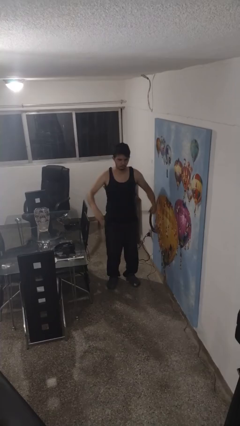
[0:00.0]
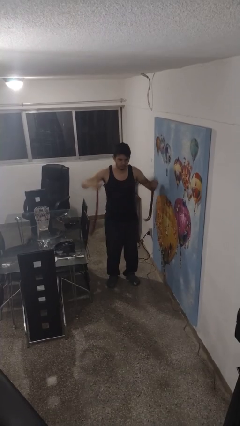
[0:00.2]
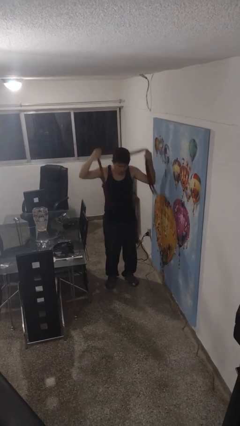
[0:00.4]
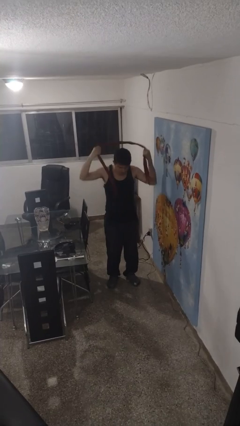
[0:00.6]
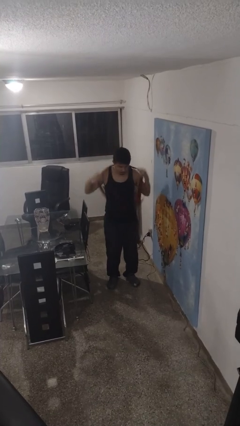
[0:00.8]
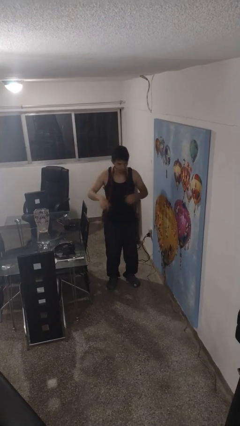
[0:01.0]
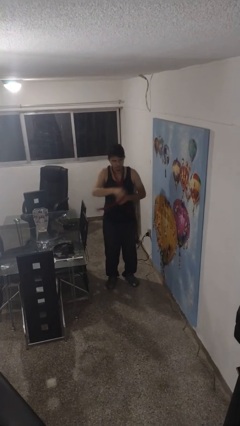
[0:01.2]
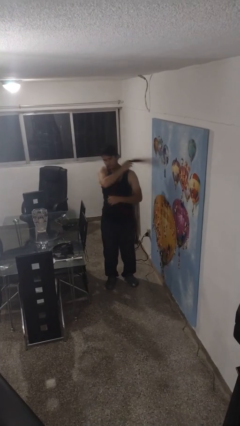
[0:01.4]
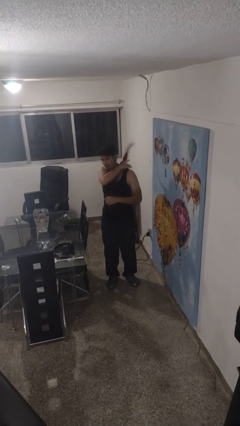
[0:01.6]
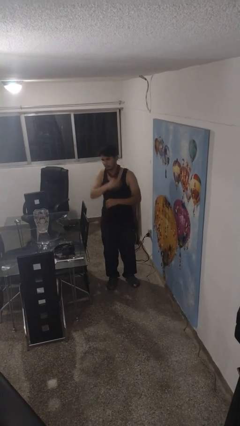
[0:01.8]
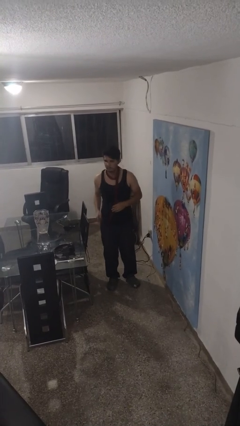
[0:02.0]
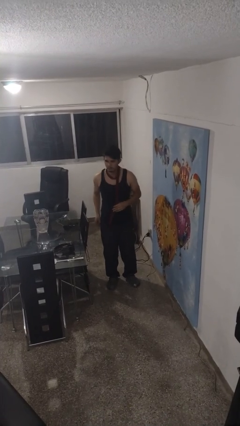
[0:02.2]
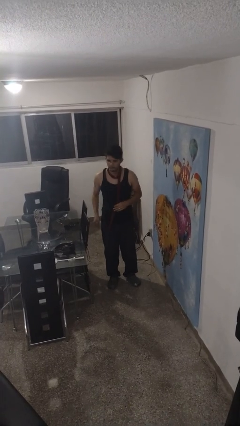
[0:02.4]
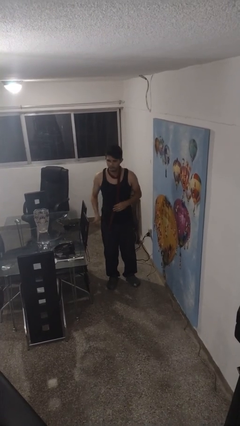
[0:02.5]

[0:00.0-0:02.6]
person puts on scarf

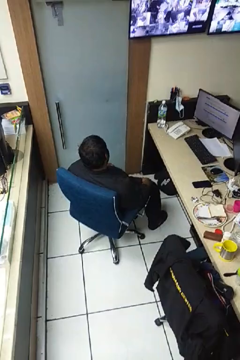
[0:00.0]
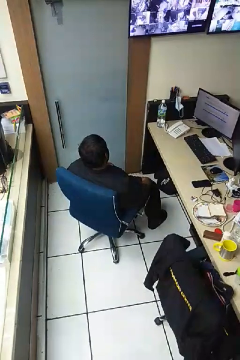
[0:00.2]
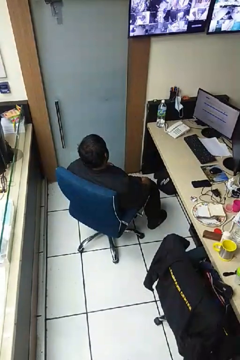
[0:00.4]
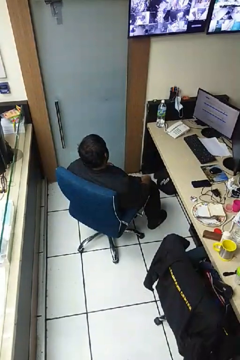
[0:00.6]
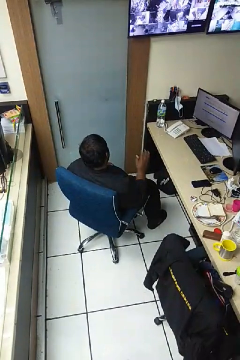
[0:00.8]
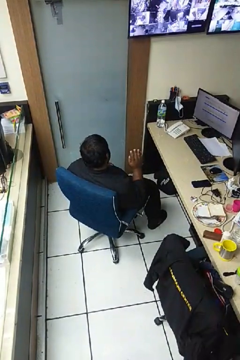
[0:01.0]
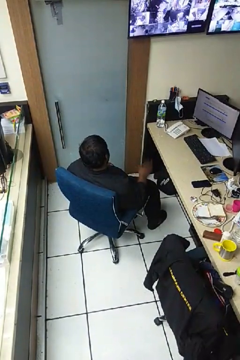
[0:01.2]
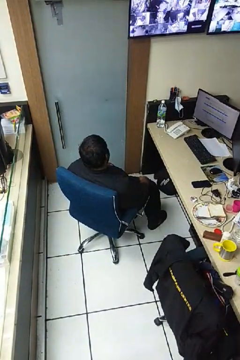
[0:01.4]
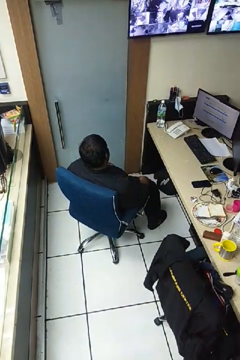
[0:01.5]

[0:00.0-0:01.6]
person slaps hands on thighs

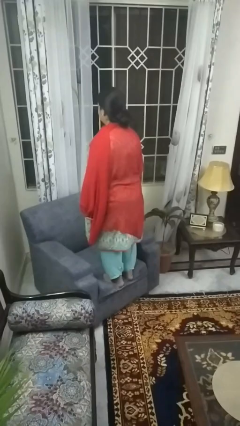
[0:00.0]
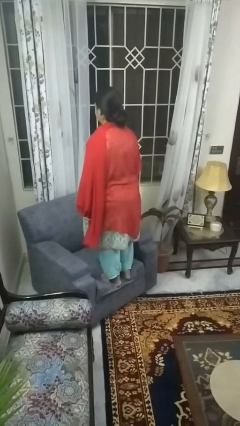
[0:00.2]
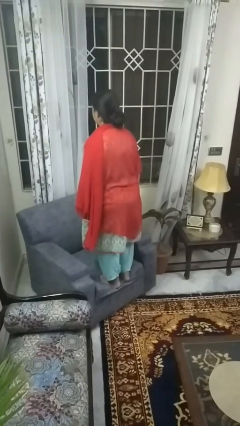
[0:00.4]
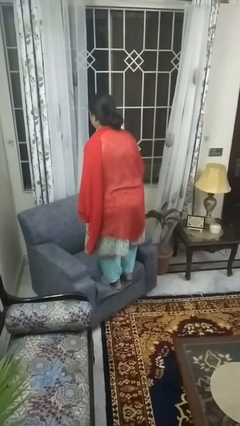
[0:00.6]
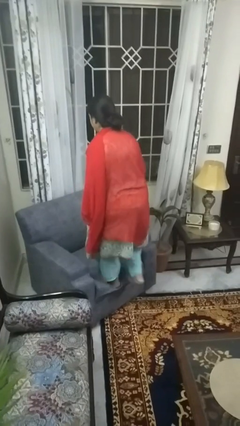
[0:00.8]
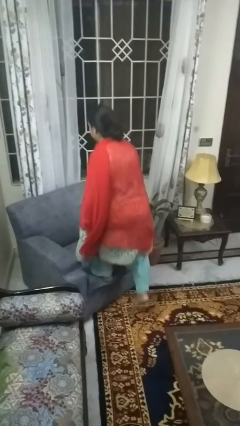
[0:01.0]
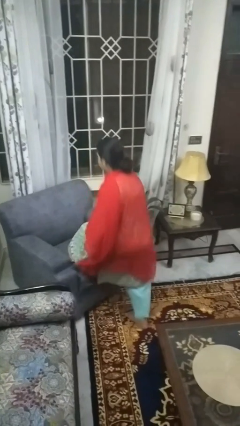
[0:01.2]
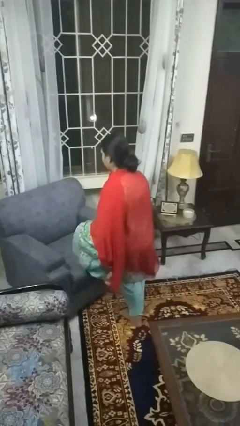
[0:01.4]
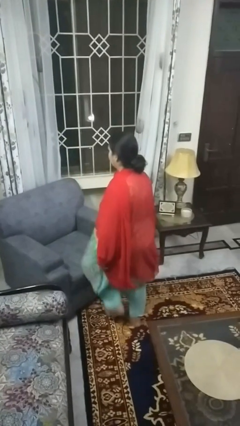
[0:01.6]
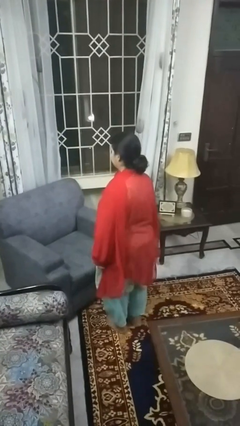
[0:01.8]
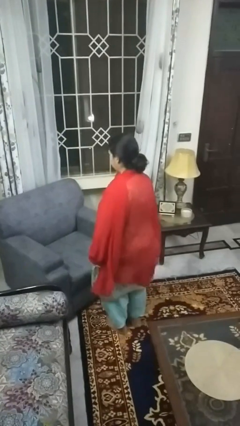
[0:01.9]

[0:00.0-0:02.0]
person climbs off couch

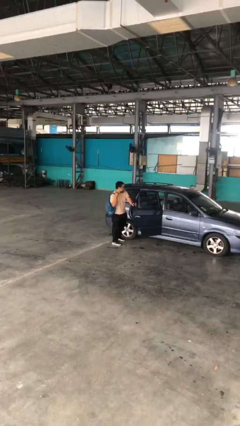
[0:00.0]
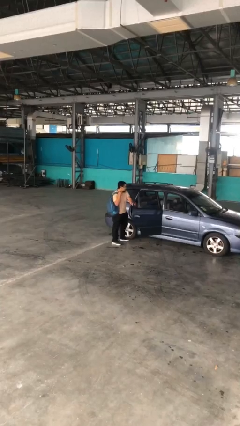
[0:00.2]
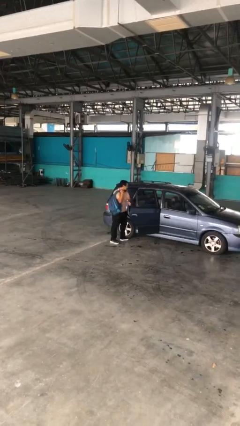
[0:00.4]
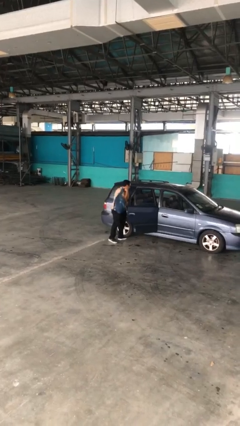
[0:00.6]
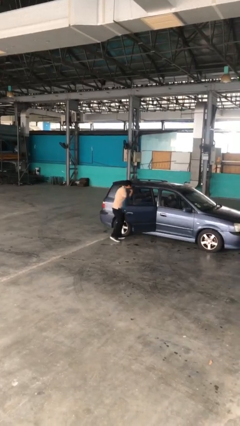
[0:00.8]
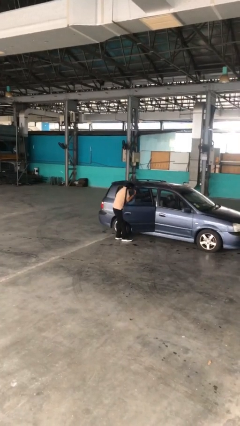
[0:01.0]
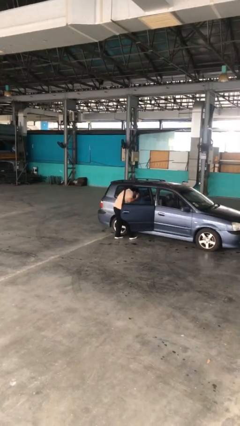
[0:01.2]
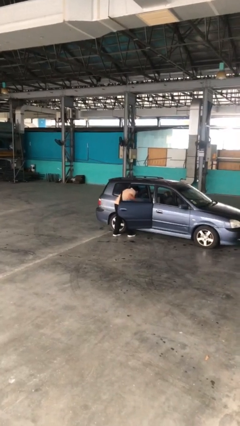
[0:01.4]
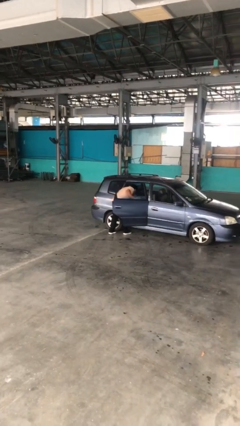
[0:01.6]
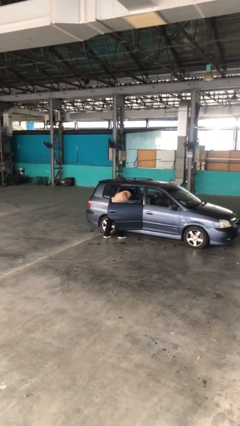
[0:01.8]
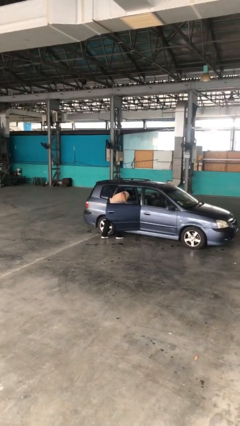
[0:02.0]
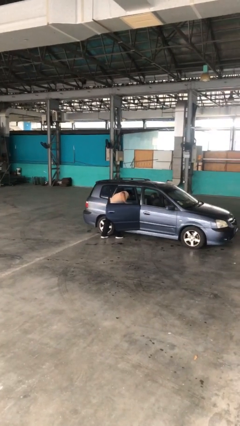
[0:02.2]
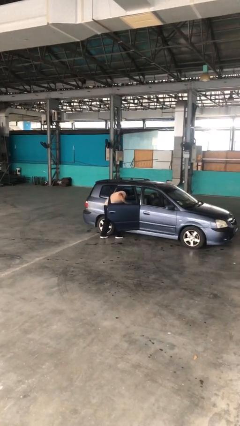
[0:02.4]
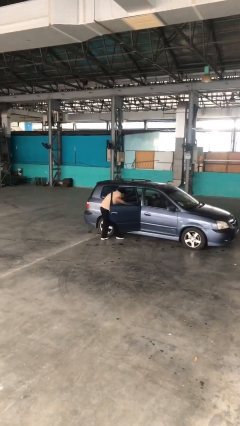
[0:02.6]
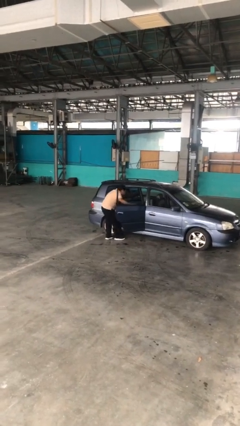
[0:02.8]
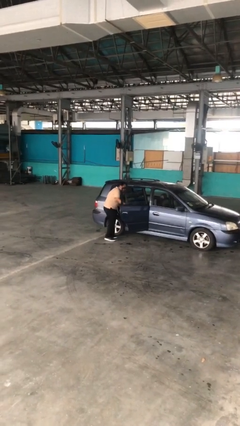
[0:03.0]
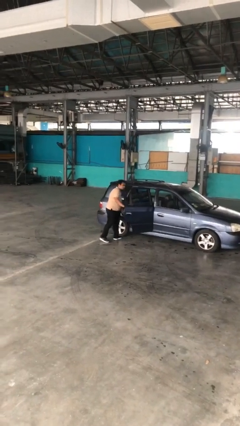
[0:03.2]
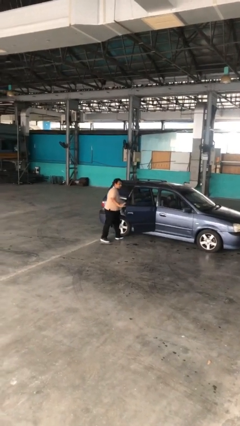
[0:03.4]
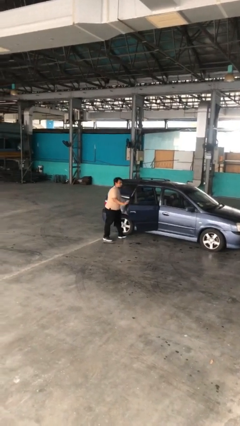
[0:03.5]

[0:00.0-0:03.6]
person loads car

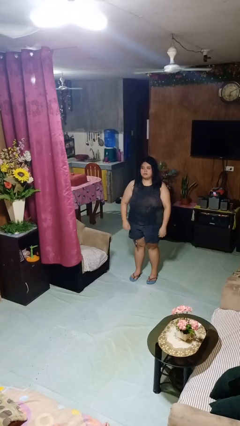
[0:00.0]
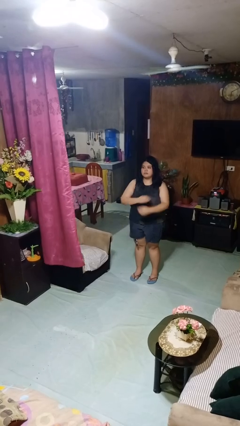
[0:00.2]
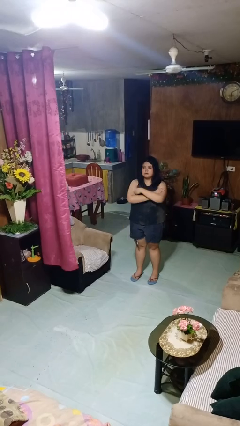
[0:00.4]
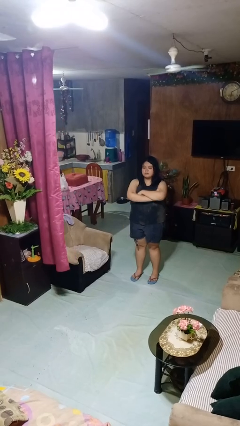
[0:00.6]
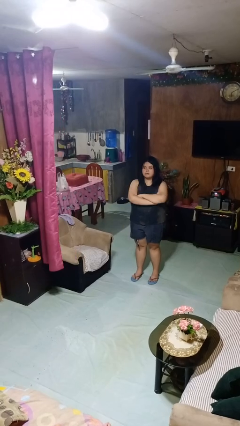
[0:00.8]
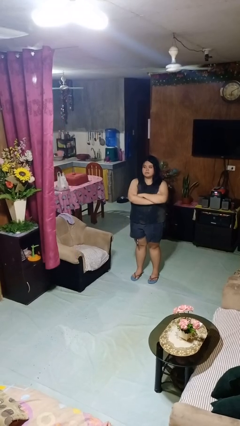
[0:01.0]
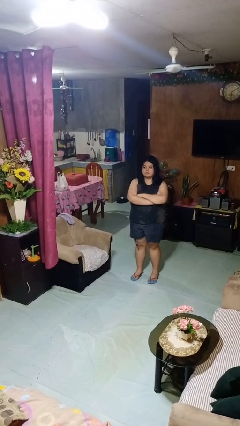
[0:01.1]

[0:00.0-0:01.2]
person crosses arms

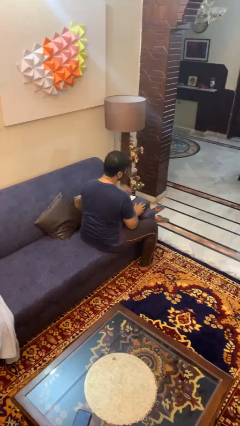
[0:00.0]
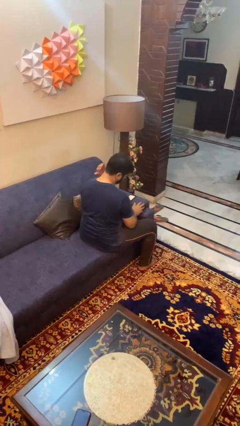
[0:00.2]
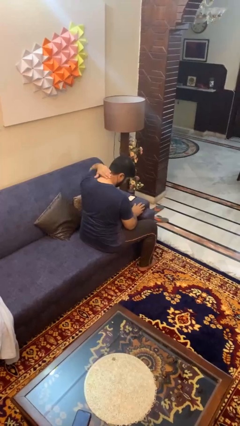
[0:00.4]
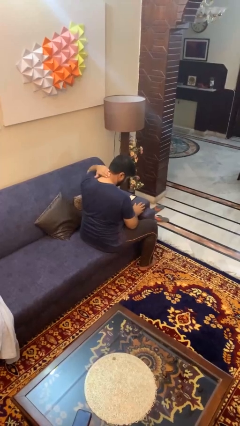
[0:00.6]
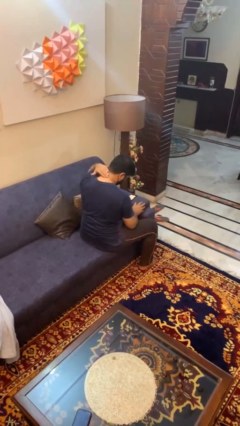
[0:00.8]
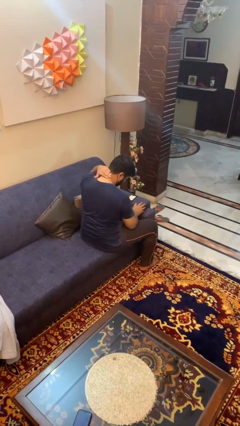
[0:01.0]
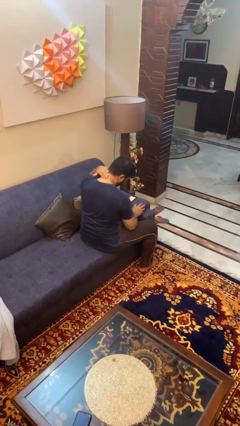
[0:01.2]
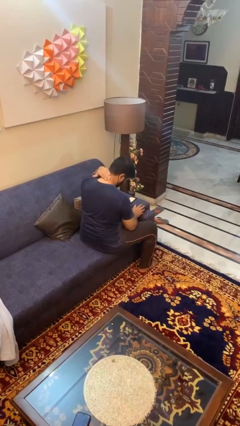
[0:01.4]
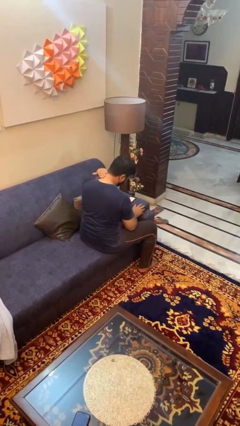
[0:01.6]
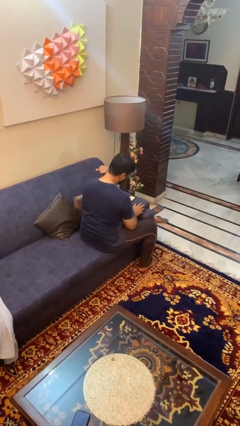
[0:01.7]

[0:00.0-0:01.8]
person rubs neck

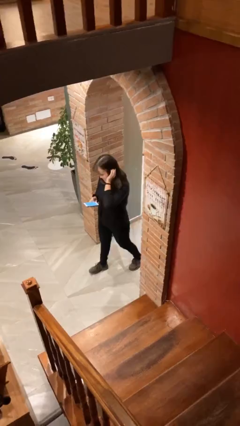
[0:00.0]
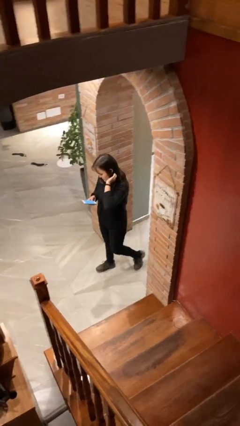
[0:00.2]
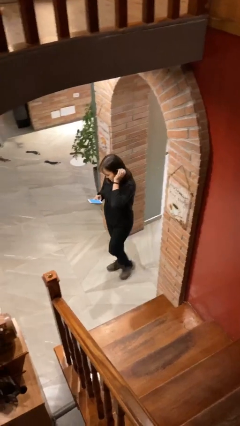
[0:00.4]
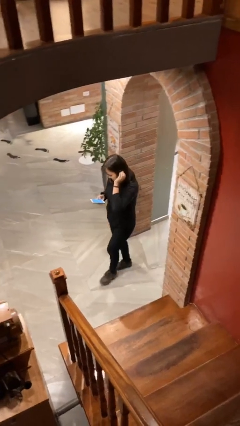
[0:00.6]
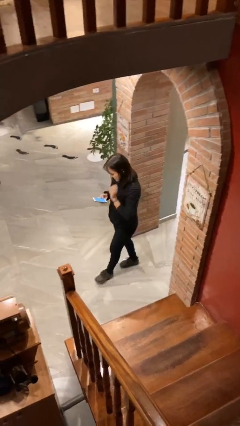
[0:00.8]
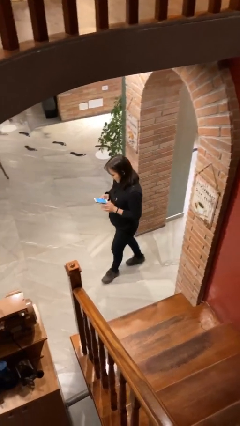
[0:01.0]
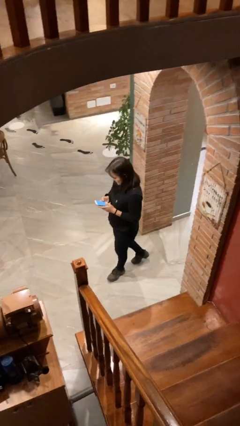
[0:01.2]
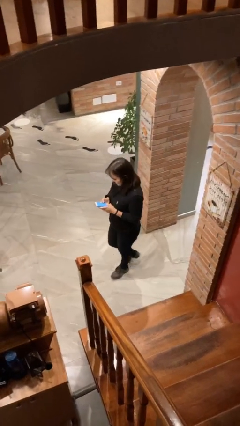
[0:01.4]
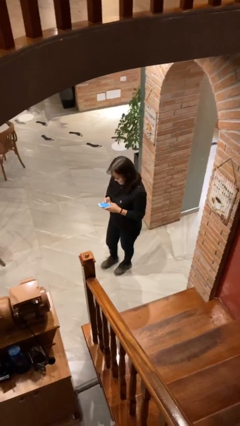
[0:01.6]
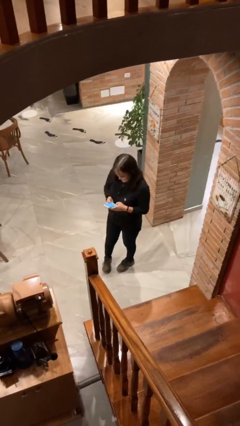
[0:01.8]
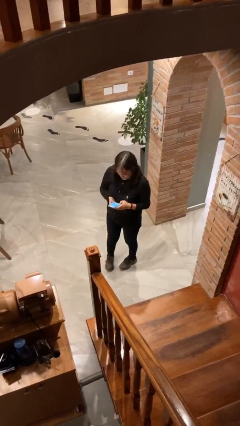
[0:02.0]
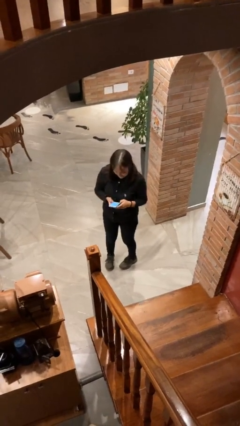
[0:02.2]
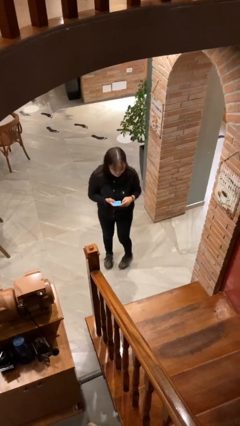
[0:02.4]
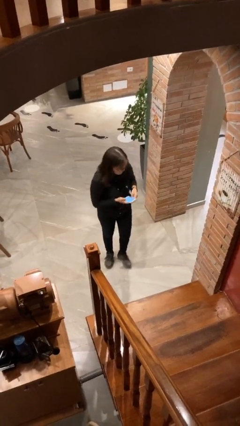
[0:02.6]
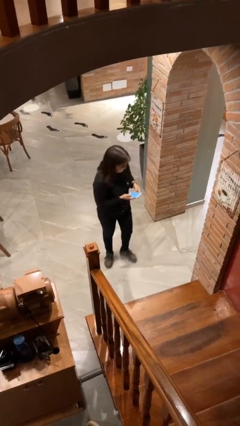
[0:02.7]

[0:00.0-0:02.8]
person enters scene through structure

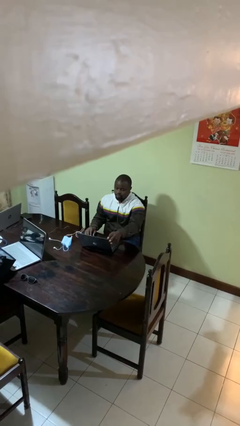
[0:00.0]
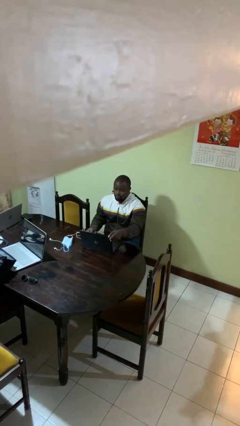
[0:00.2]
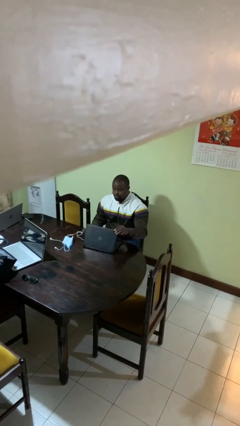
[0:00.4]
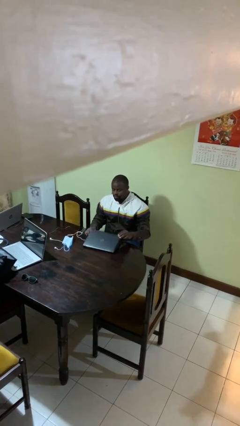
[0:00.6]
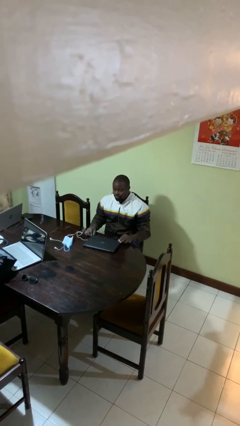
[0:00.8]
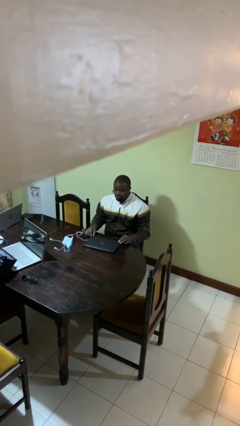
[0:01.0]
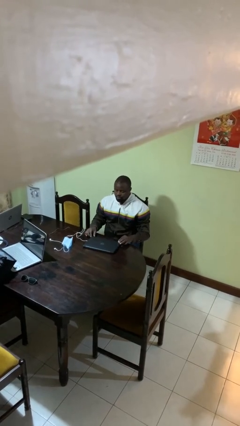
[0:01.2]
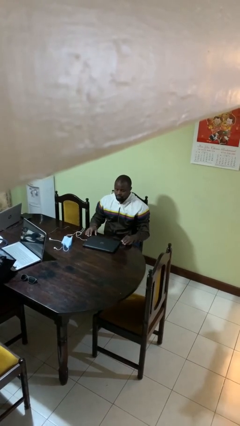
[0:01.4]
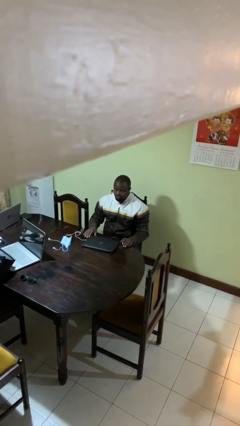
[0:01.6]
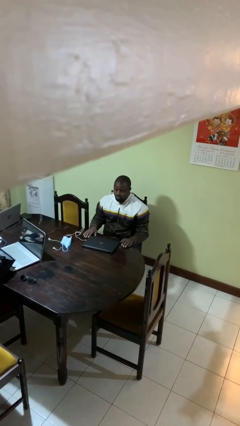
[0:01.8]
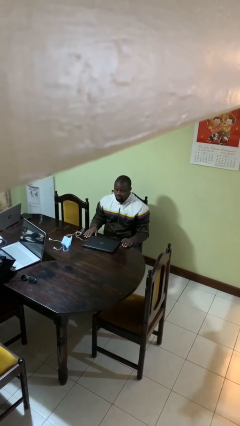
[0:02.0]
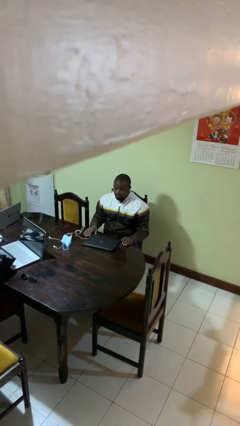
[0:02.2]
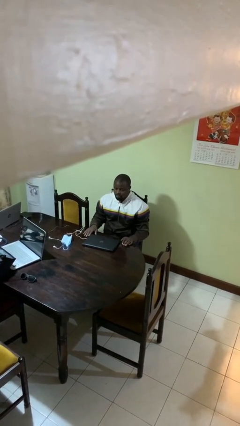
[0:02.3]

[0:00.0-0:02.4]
person closes laptop
